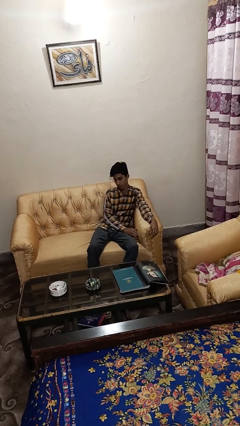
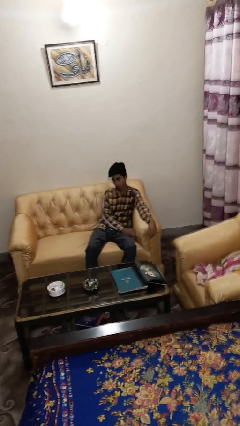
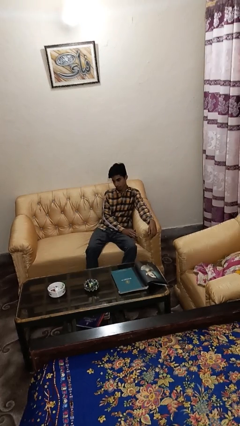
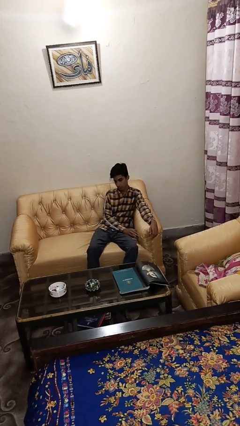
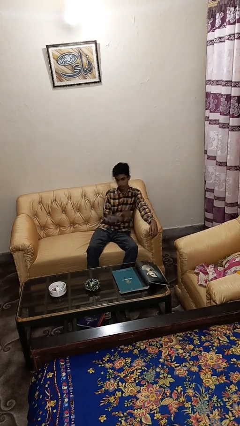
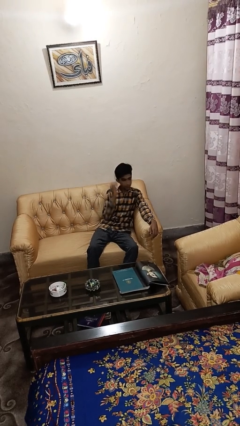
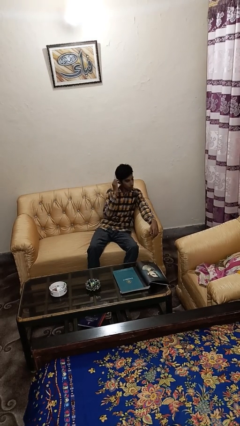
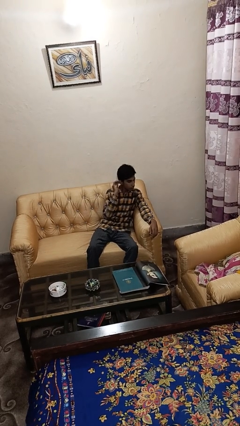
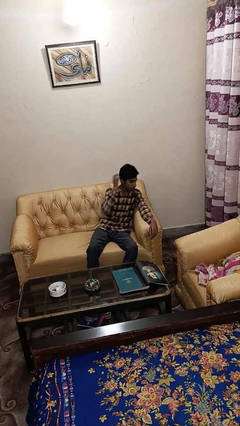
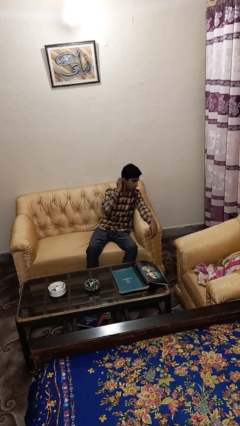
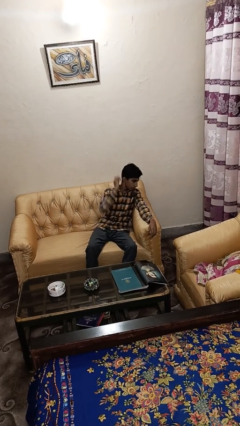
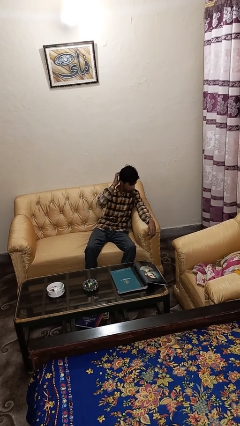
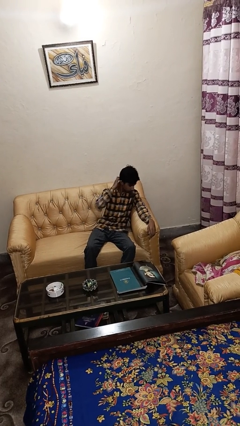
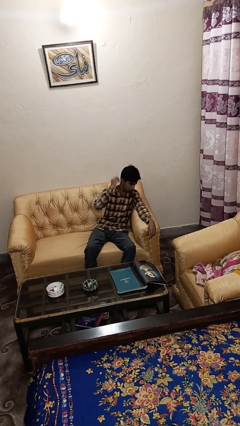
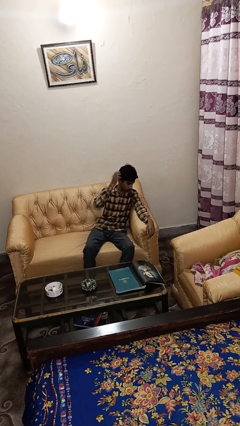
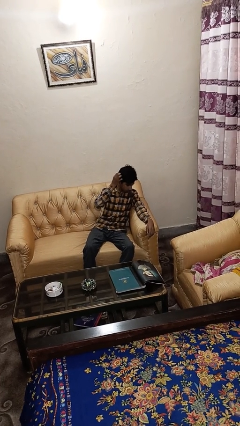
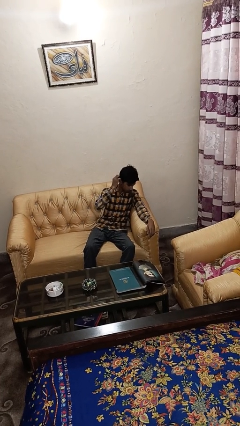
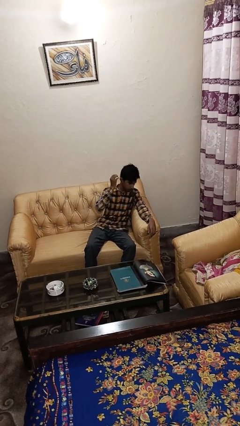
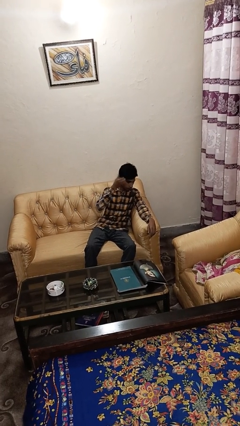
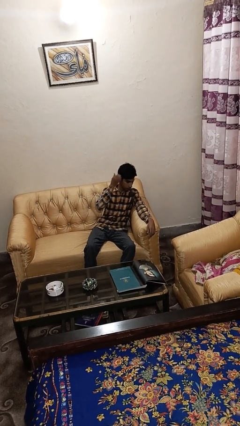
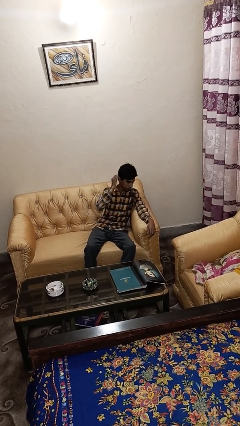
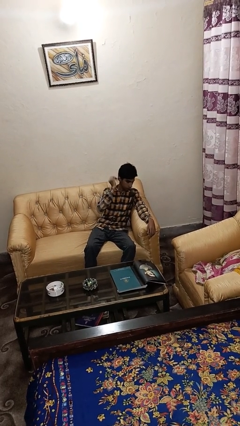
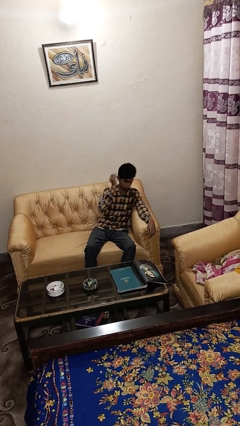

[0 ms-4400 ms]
person strokes hair

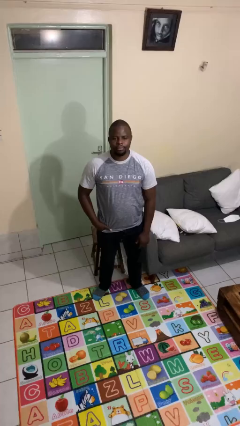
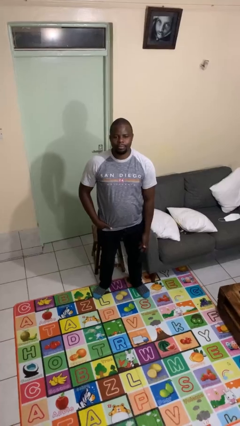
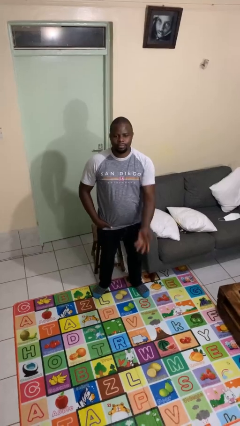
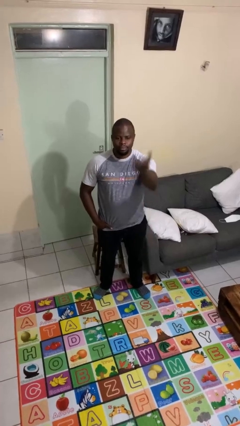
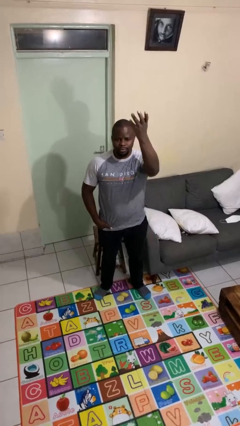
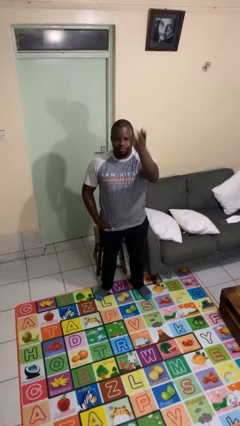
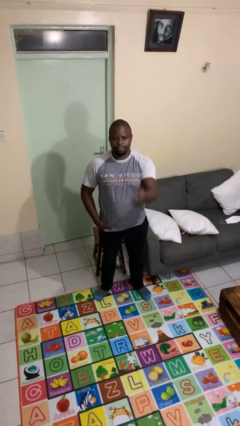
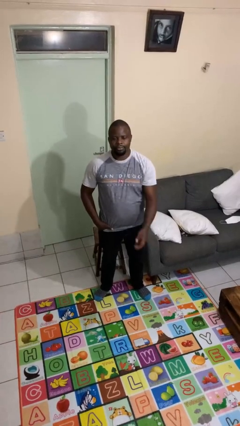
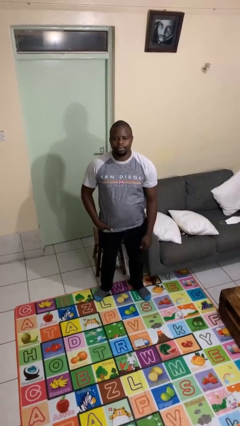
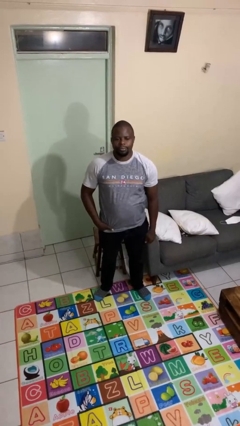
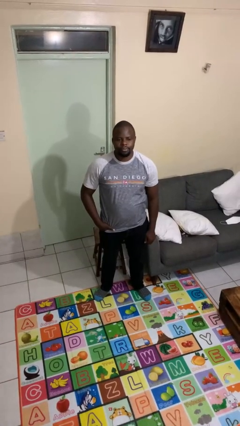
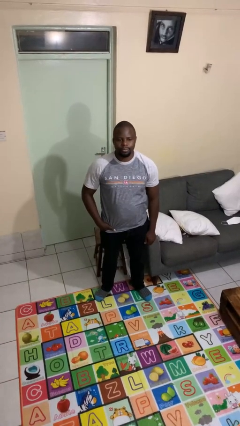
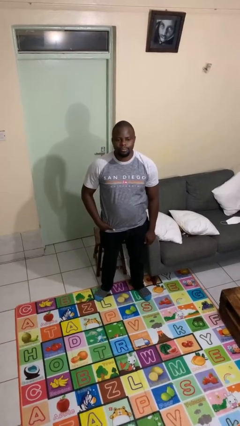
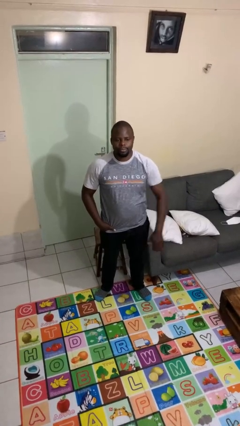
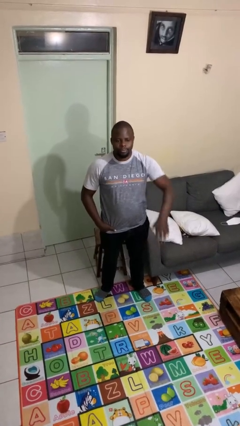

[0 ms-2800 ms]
person gestures swipe up

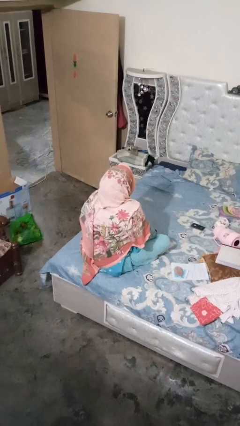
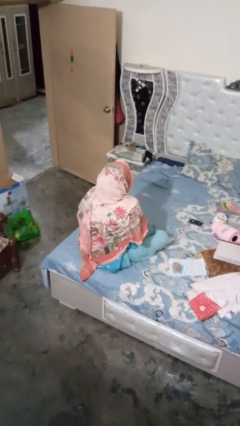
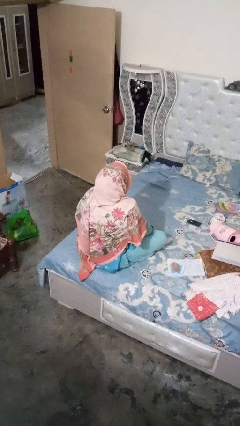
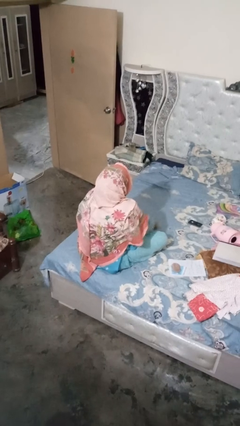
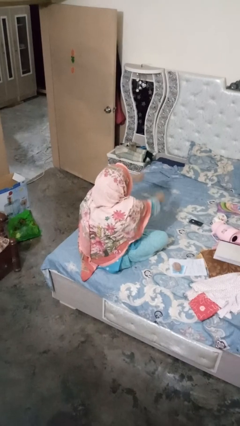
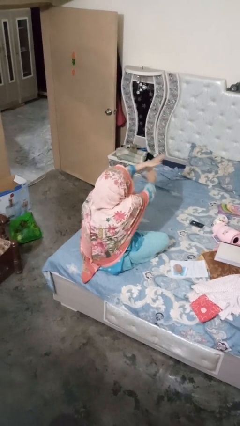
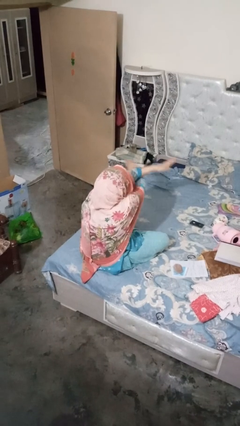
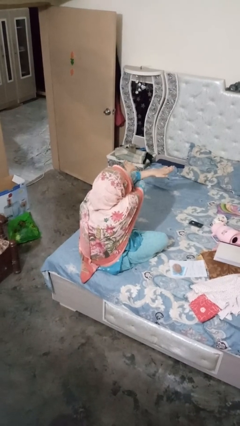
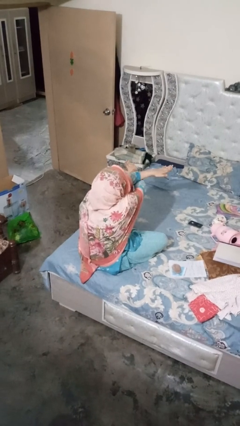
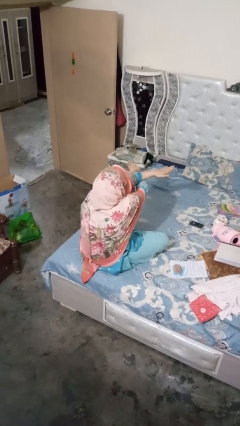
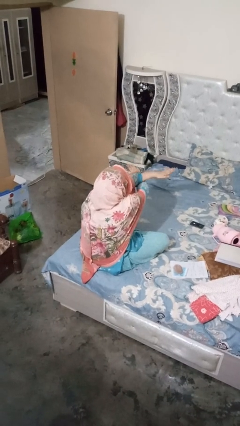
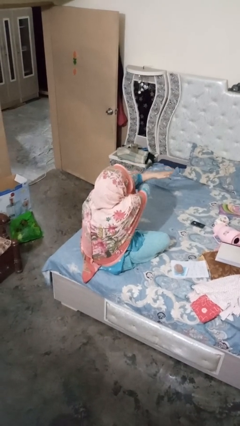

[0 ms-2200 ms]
person gestures arms x

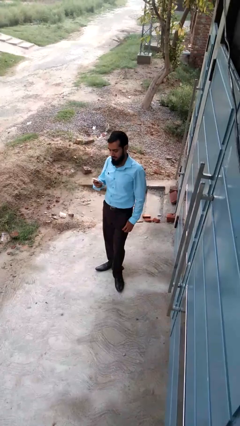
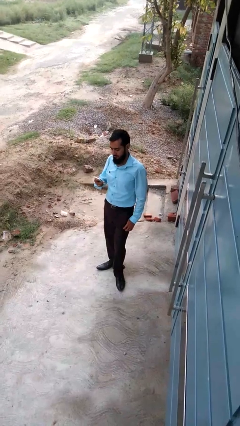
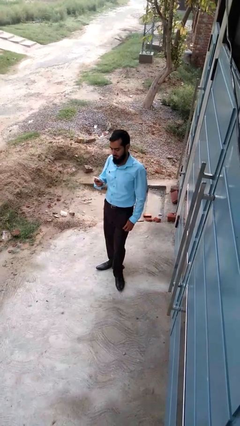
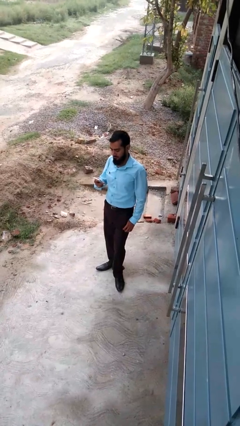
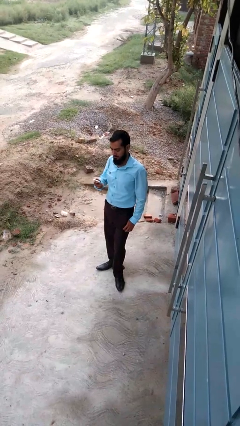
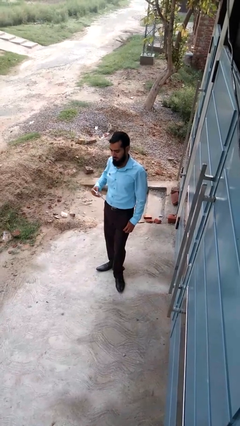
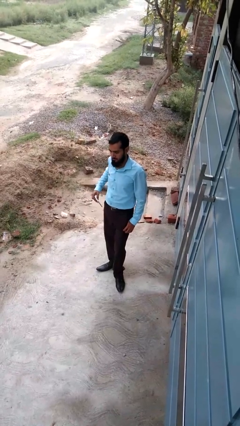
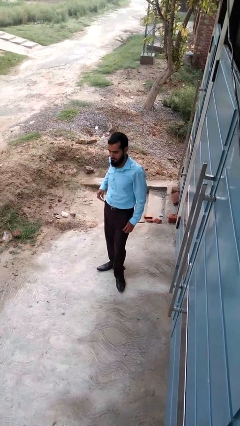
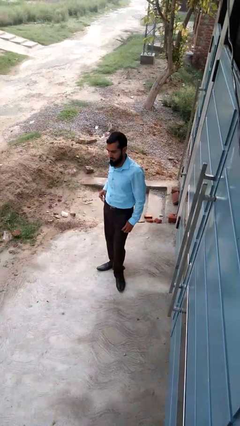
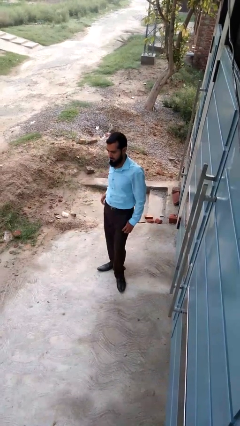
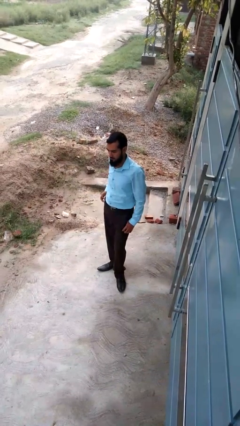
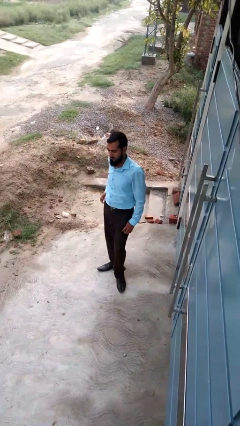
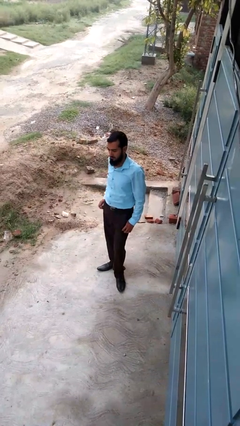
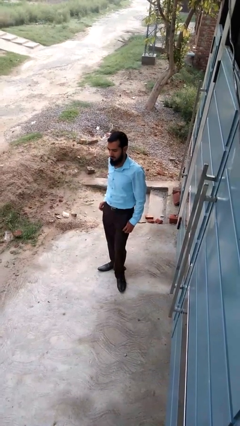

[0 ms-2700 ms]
person puts phone into pocket

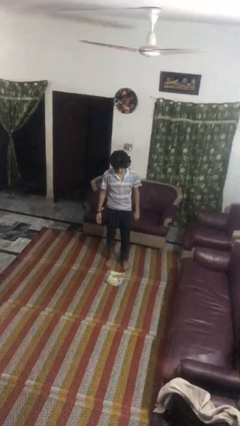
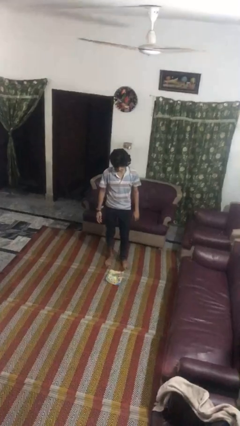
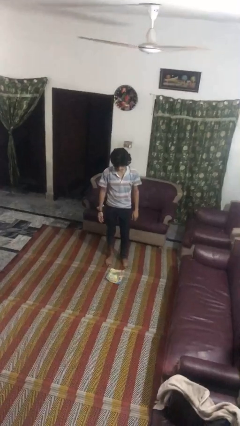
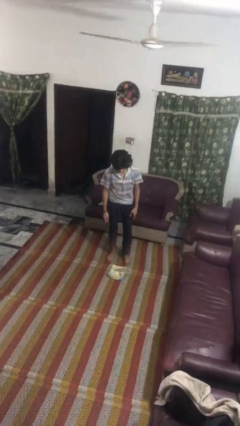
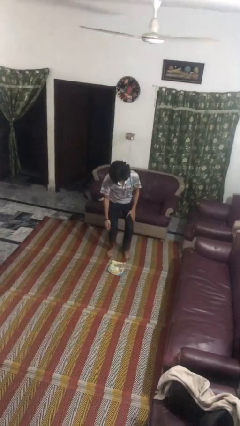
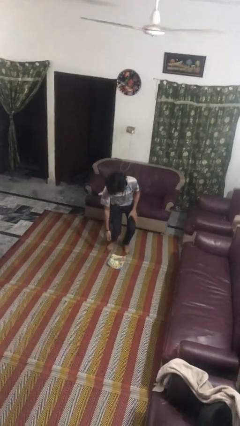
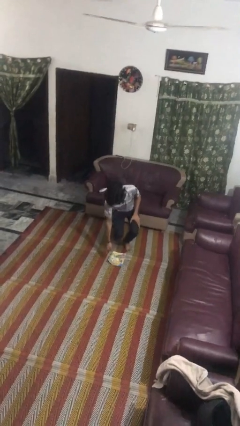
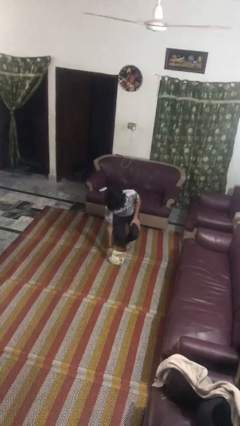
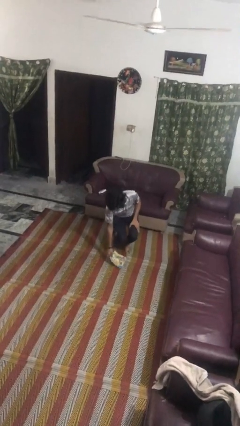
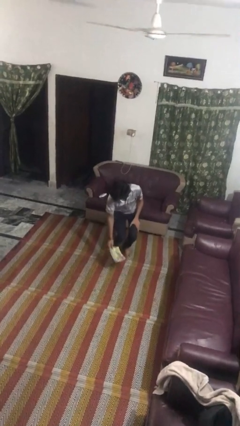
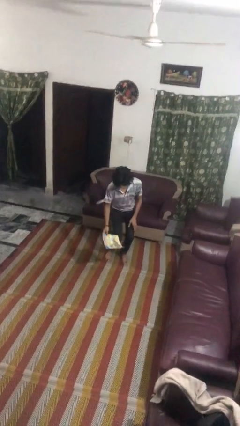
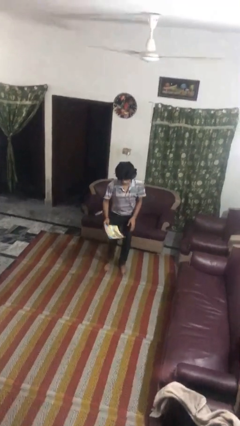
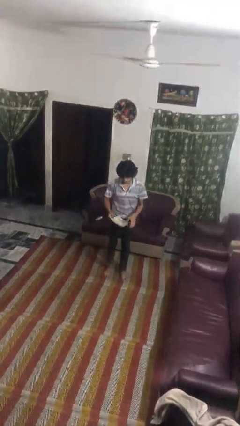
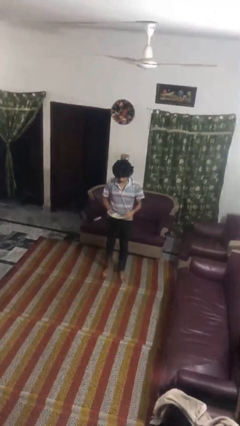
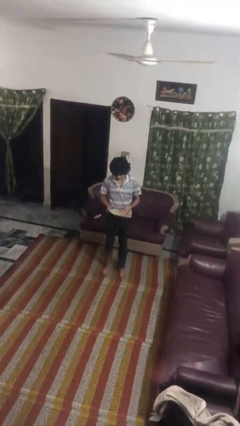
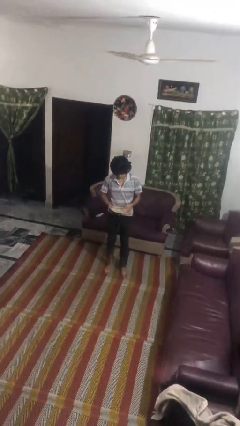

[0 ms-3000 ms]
person picks up object from floor

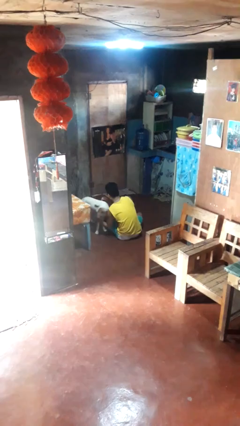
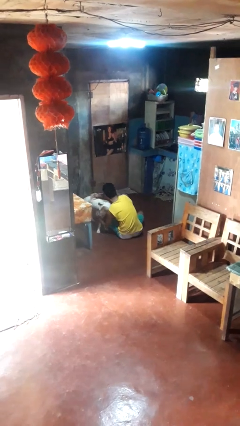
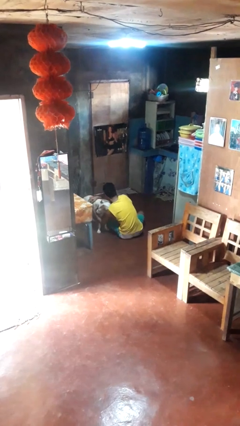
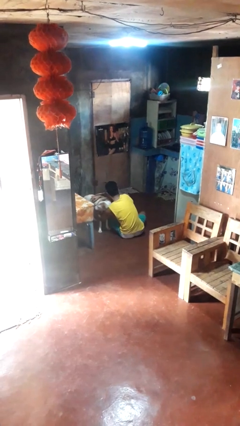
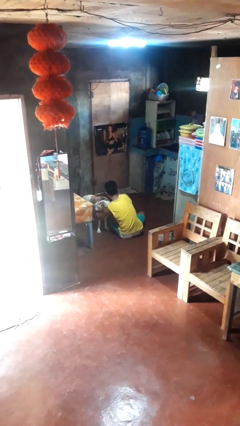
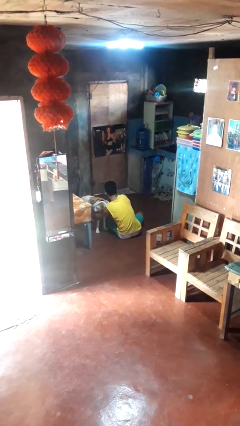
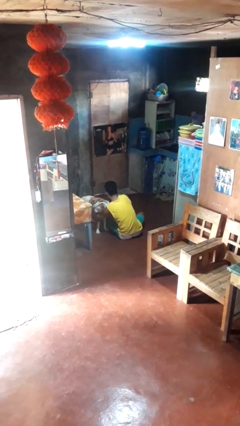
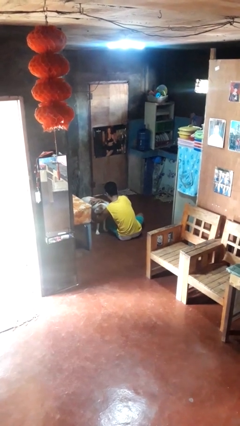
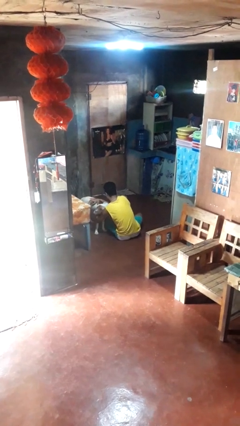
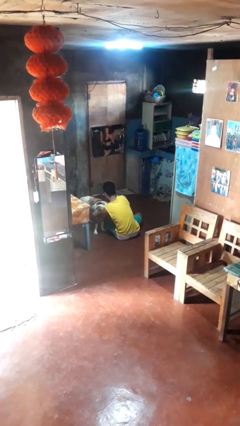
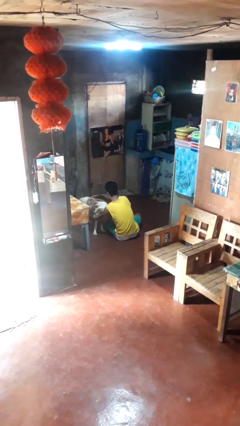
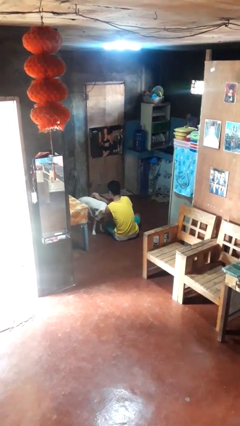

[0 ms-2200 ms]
person hugs dog

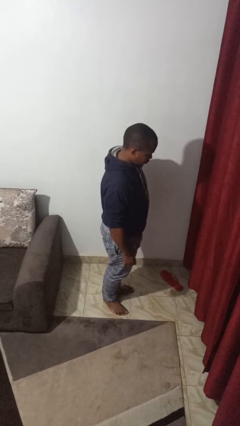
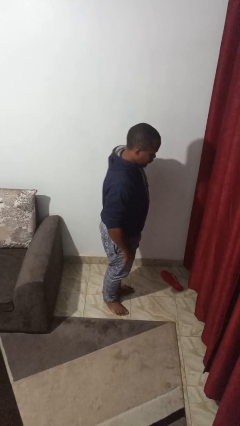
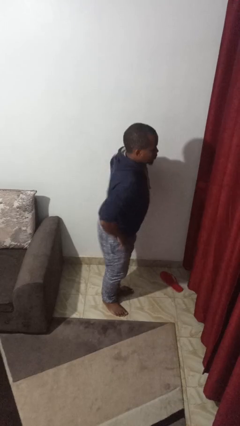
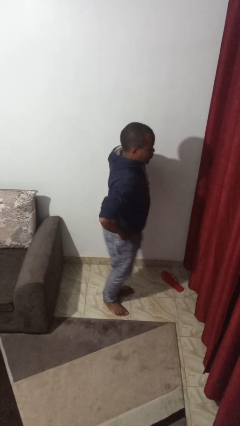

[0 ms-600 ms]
person wiggles hips
